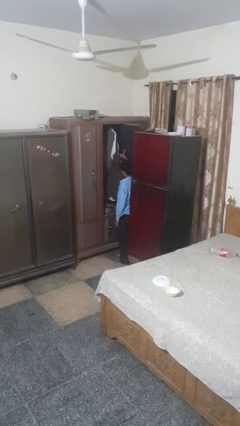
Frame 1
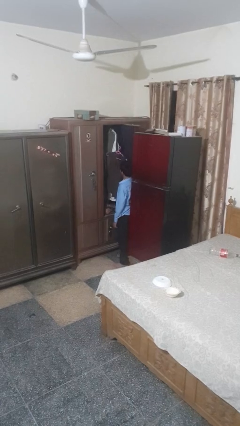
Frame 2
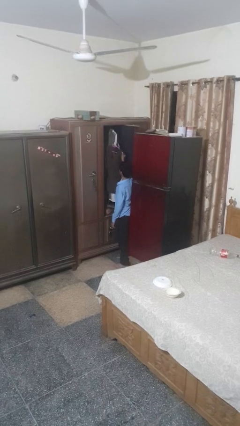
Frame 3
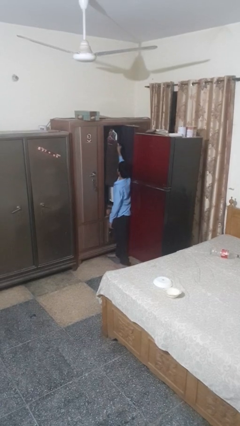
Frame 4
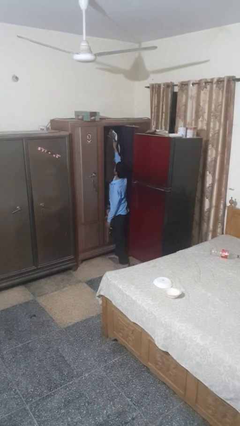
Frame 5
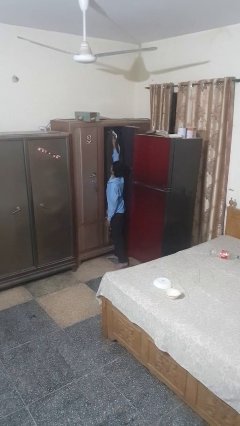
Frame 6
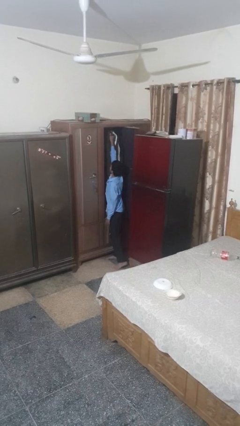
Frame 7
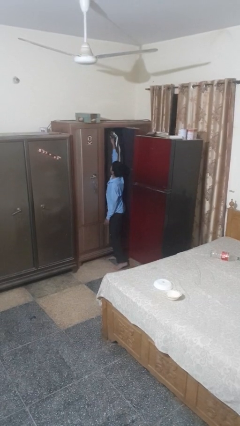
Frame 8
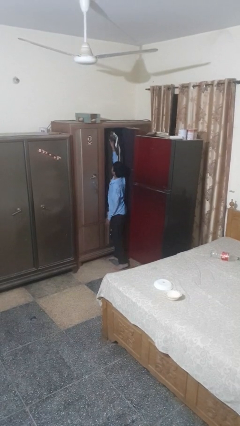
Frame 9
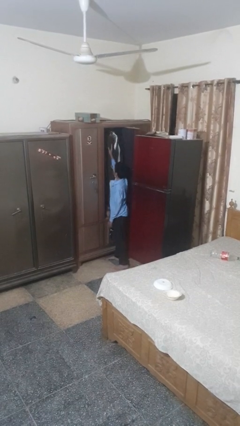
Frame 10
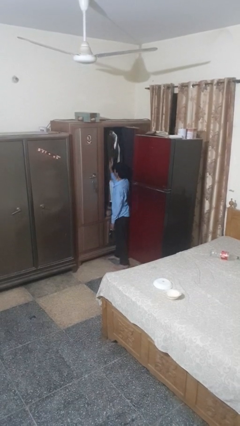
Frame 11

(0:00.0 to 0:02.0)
person puts clothes into closet

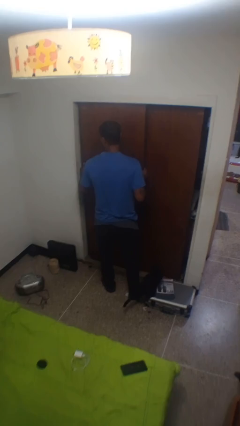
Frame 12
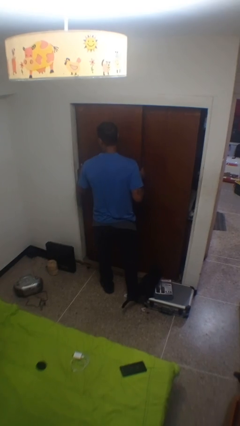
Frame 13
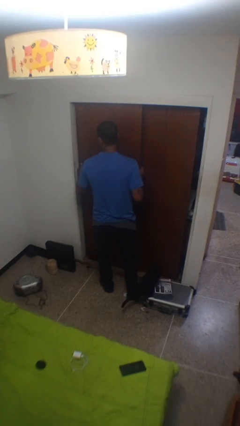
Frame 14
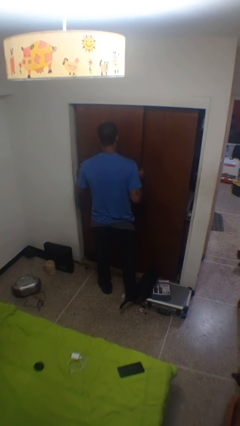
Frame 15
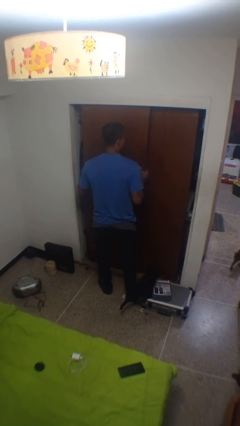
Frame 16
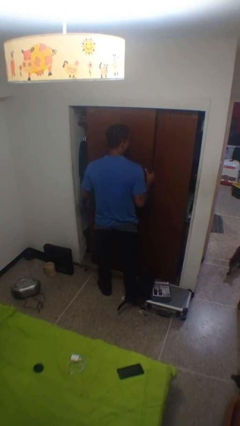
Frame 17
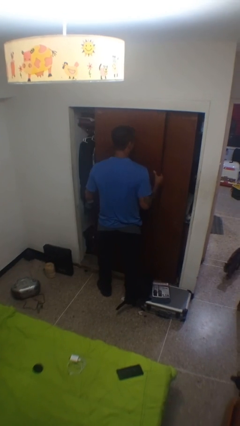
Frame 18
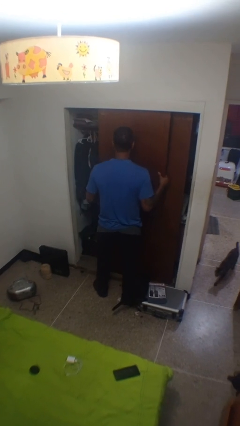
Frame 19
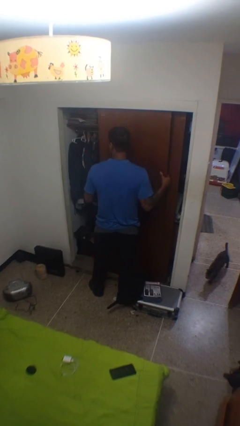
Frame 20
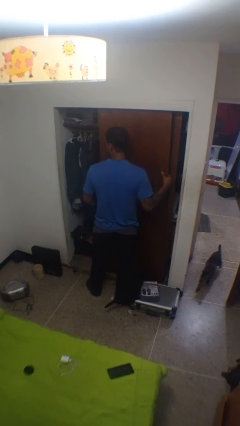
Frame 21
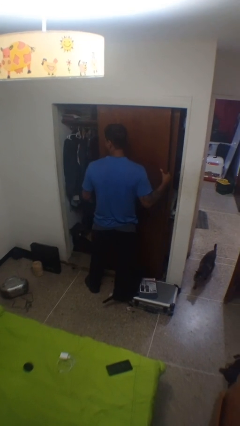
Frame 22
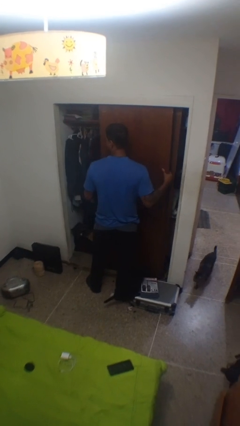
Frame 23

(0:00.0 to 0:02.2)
person opens closet door

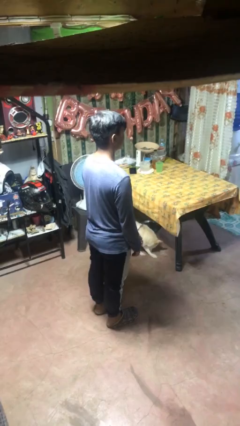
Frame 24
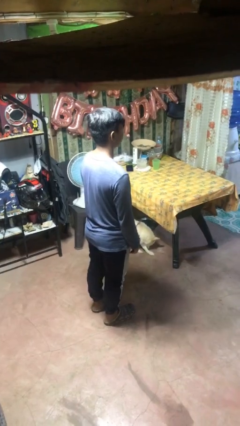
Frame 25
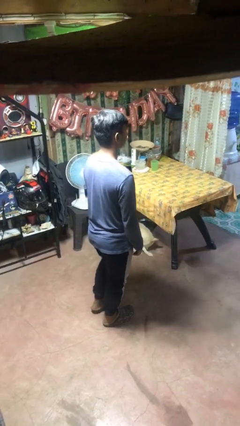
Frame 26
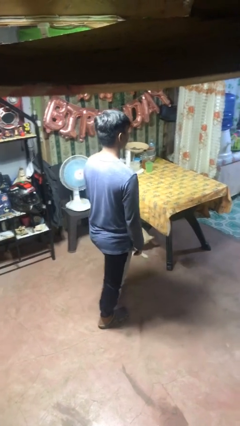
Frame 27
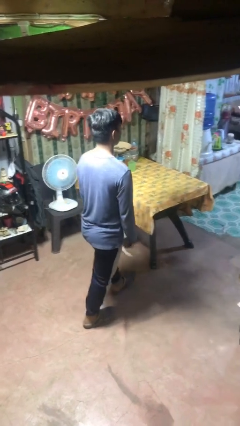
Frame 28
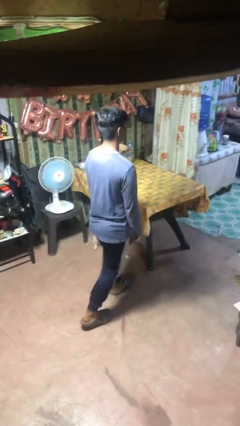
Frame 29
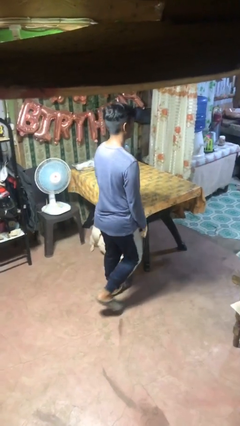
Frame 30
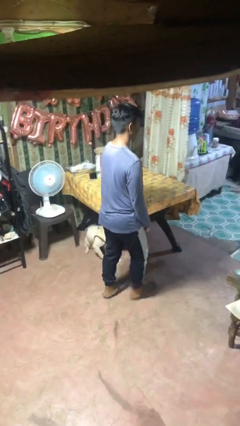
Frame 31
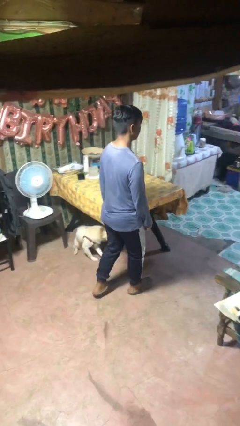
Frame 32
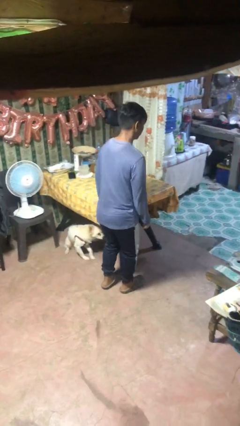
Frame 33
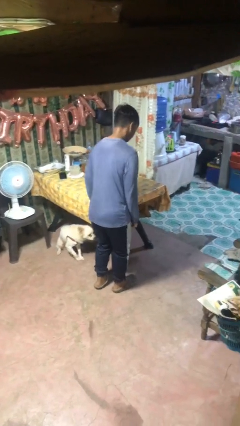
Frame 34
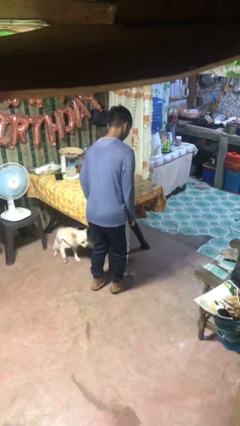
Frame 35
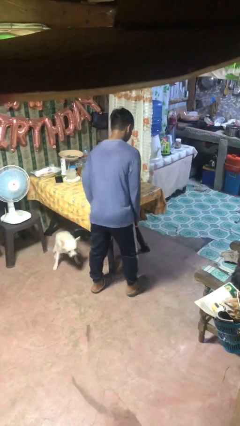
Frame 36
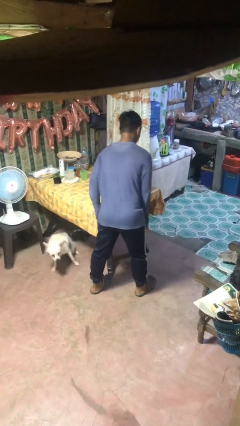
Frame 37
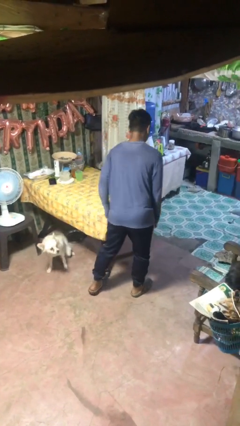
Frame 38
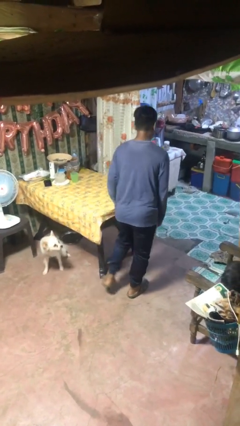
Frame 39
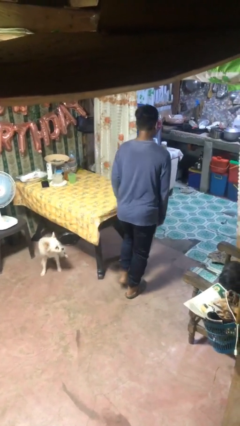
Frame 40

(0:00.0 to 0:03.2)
person bumps into table

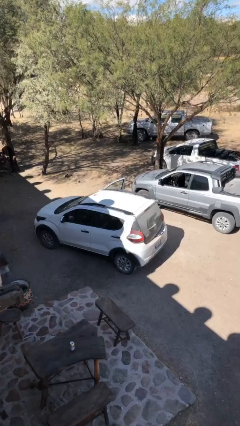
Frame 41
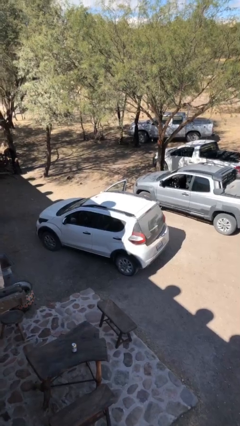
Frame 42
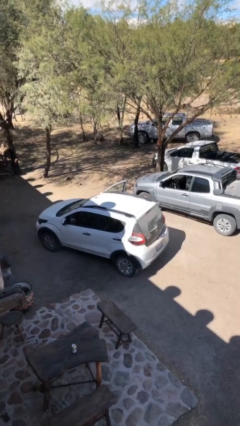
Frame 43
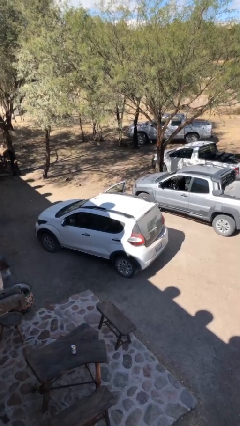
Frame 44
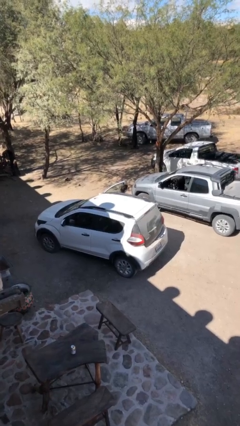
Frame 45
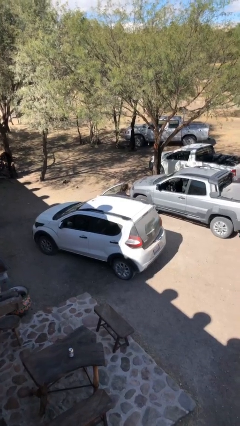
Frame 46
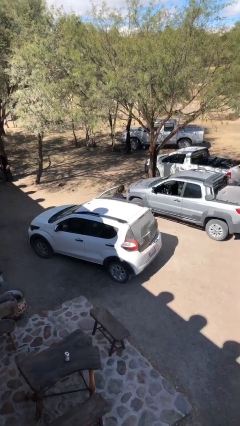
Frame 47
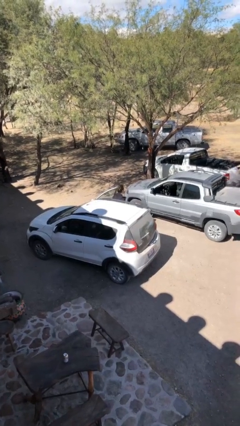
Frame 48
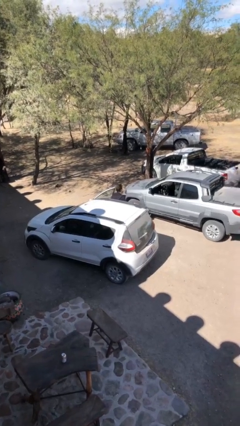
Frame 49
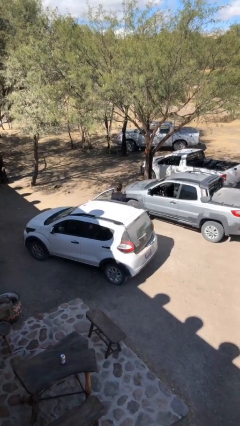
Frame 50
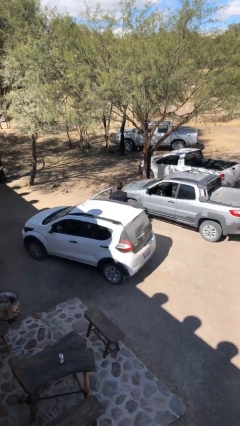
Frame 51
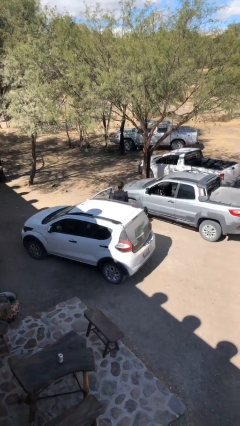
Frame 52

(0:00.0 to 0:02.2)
person exits car

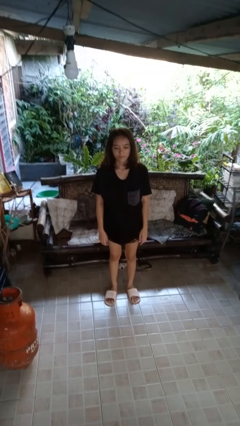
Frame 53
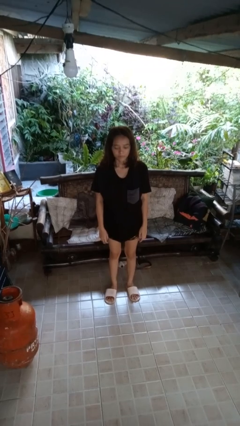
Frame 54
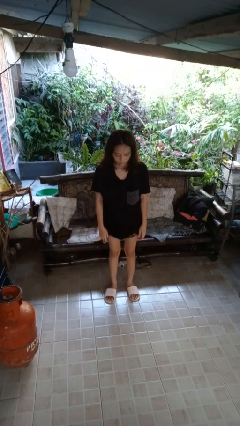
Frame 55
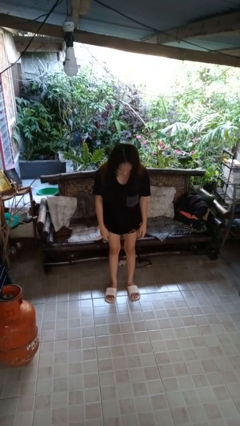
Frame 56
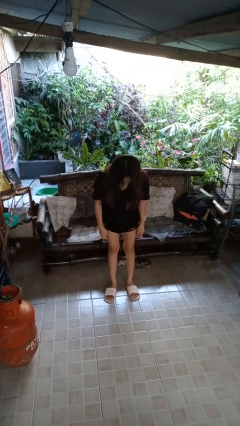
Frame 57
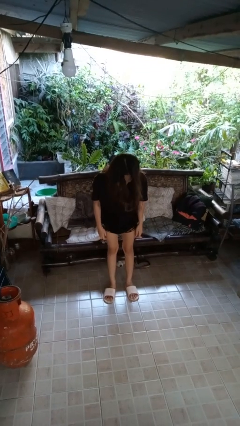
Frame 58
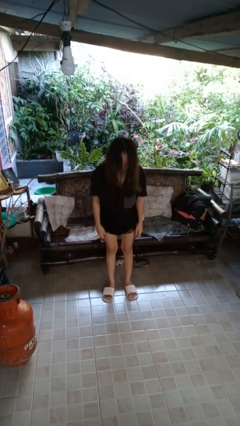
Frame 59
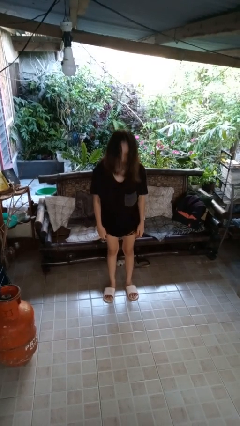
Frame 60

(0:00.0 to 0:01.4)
person bows

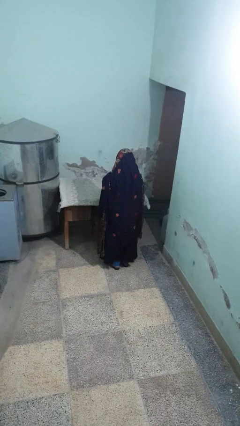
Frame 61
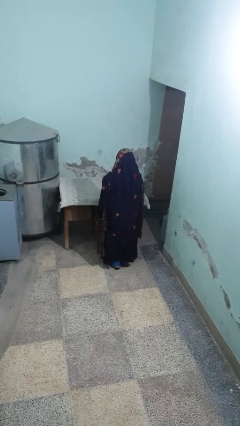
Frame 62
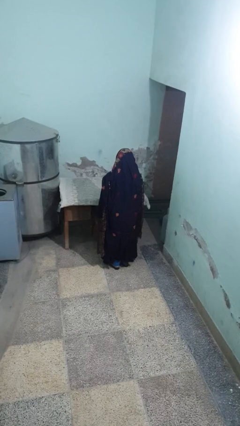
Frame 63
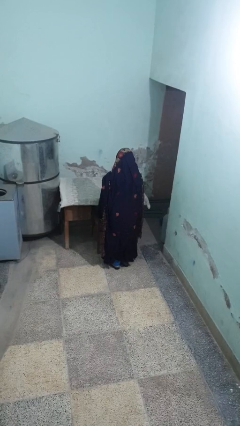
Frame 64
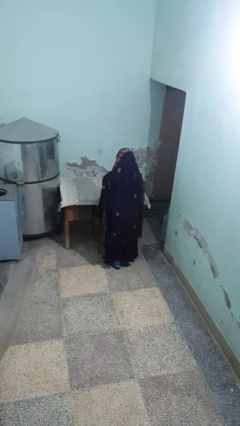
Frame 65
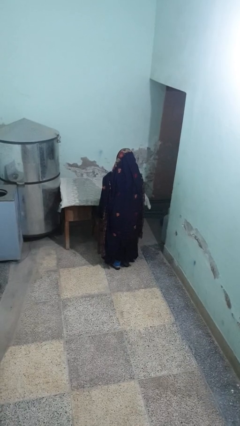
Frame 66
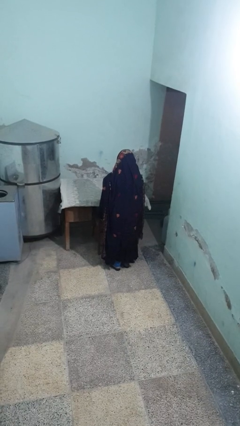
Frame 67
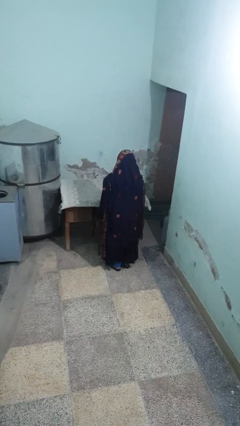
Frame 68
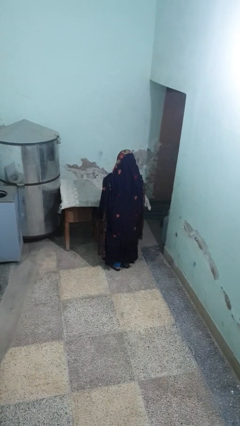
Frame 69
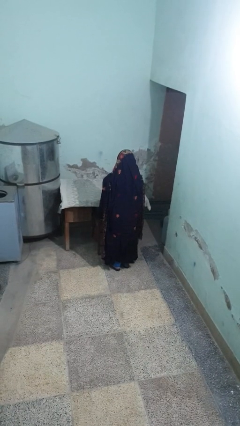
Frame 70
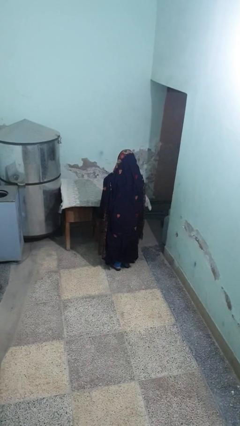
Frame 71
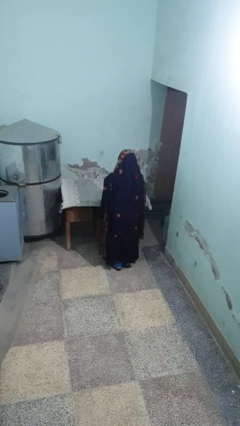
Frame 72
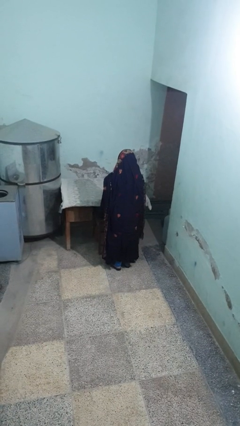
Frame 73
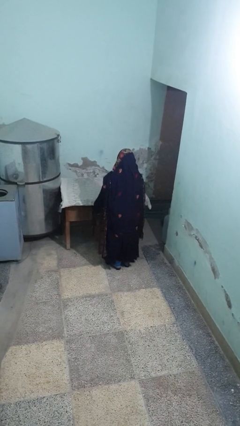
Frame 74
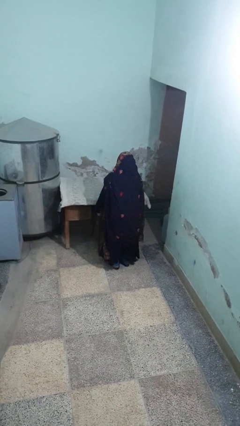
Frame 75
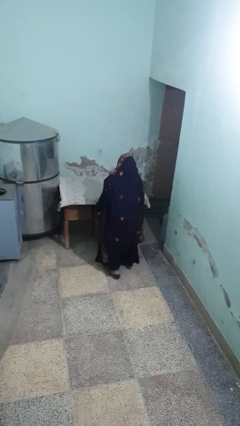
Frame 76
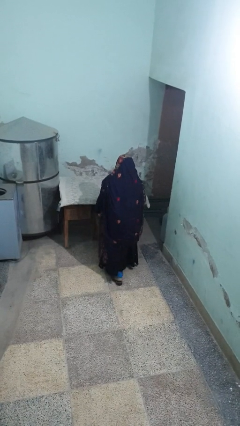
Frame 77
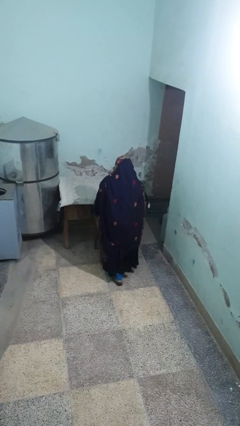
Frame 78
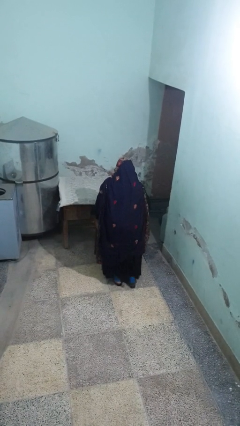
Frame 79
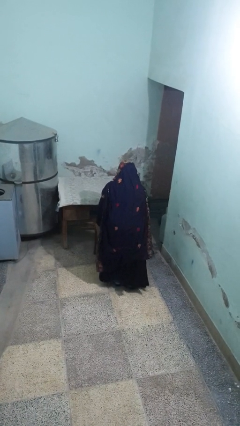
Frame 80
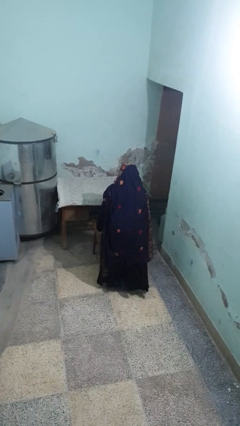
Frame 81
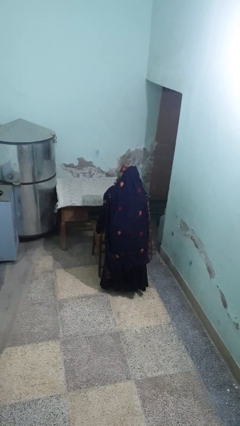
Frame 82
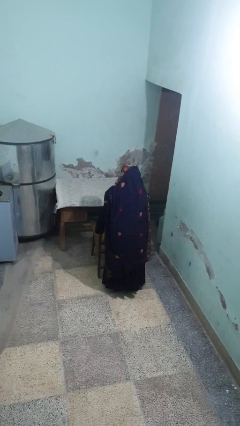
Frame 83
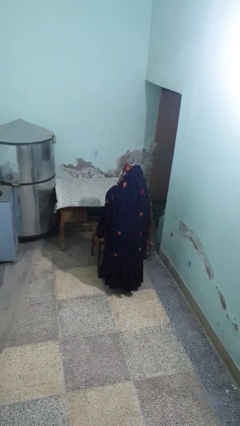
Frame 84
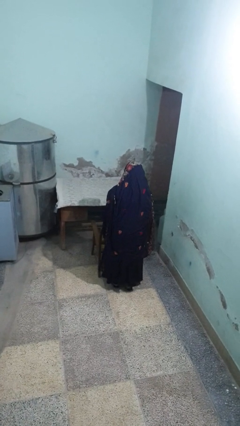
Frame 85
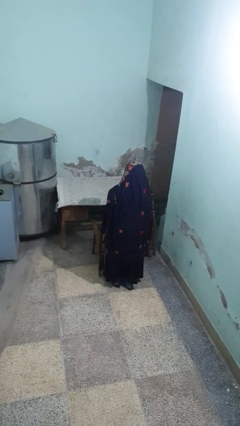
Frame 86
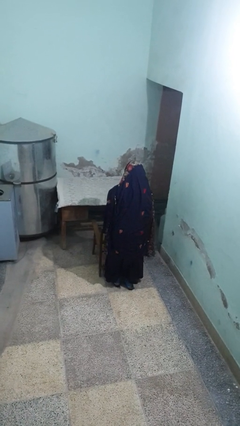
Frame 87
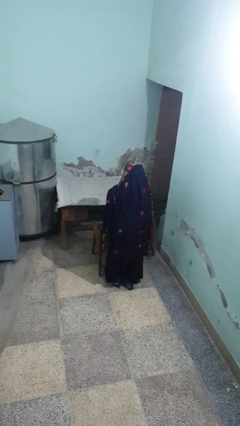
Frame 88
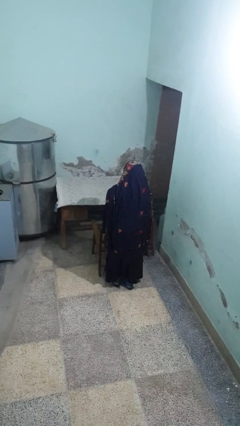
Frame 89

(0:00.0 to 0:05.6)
person pulls out chair

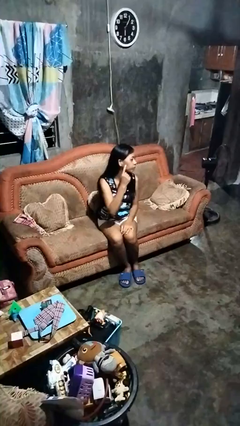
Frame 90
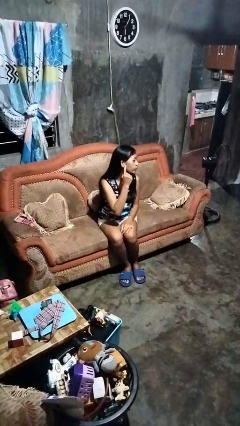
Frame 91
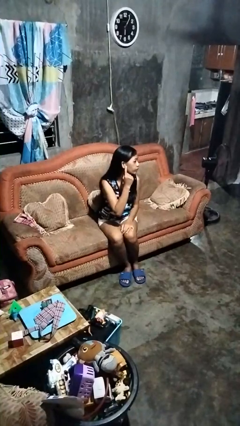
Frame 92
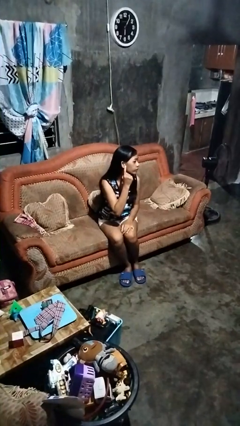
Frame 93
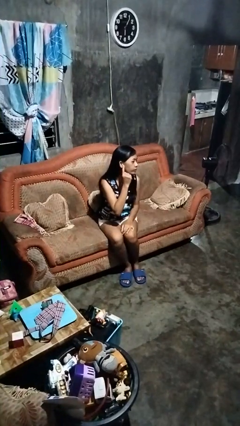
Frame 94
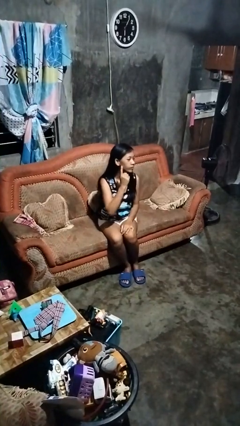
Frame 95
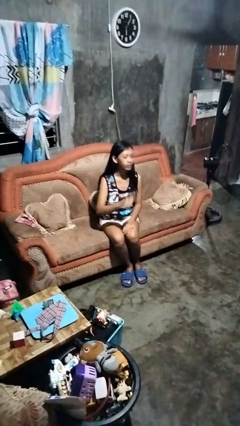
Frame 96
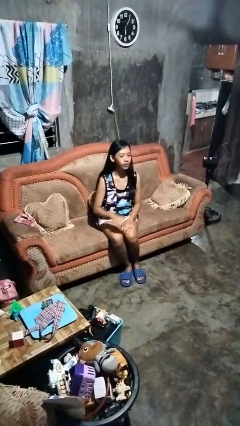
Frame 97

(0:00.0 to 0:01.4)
person gestures listen closely
